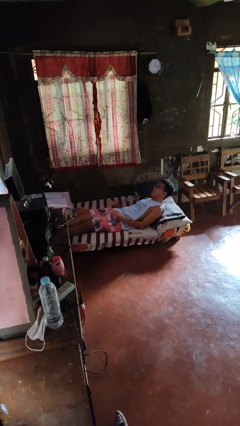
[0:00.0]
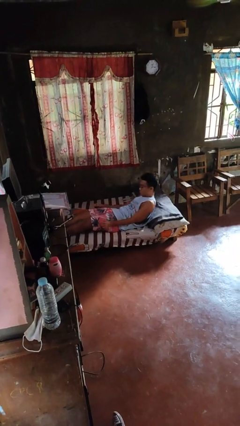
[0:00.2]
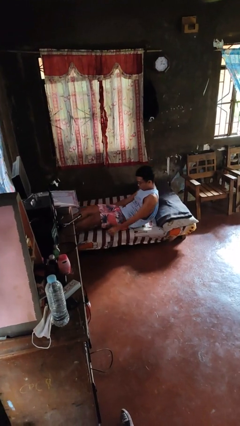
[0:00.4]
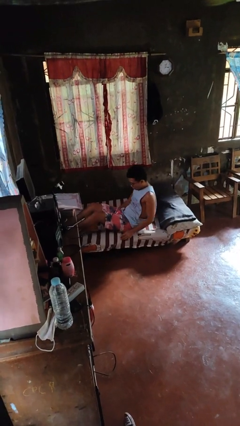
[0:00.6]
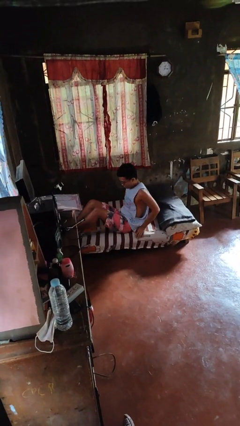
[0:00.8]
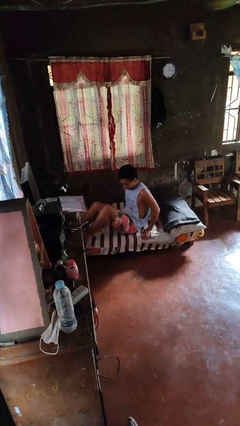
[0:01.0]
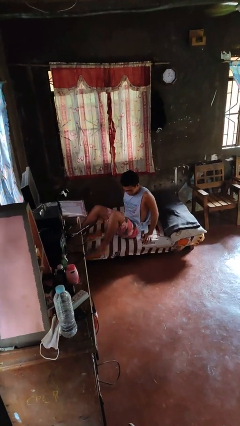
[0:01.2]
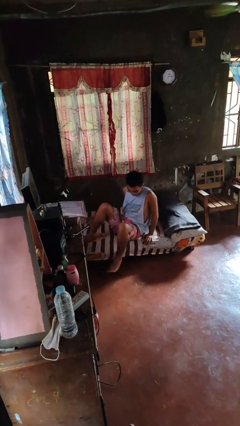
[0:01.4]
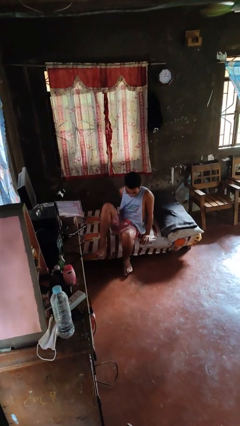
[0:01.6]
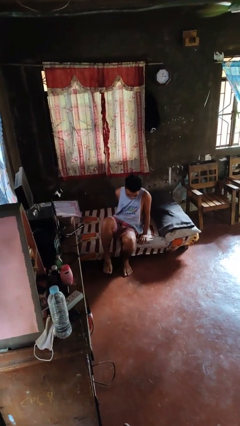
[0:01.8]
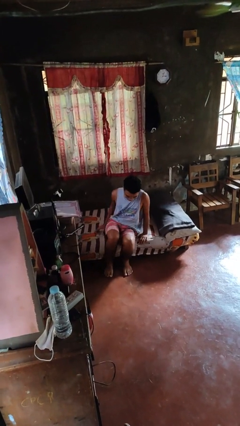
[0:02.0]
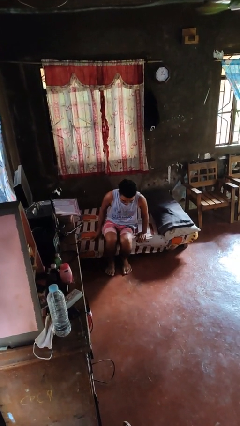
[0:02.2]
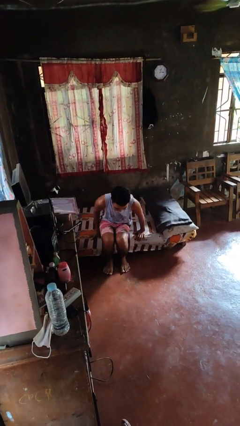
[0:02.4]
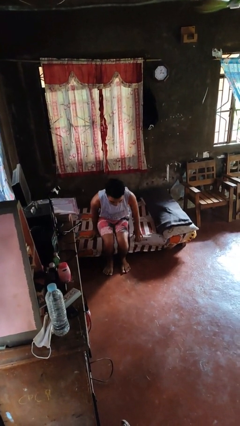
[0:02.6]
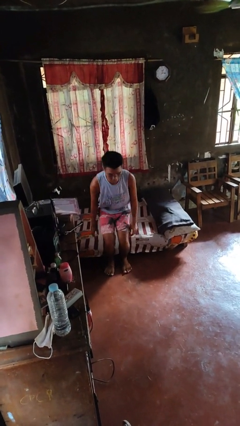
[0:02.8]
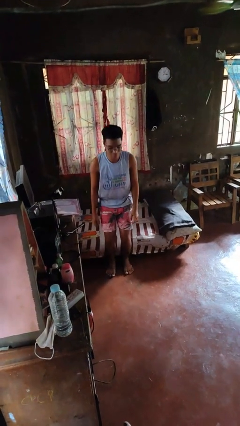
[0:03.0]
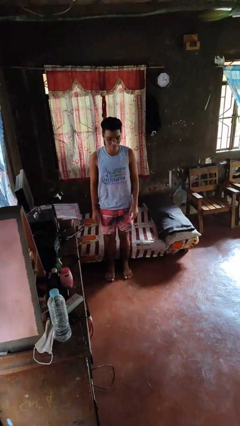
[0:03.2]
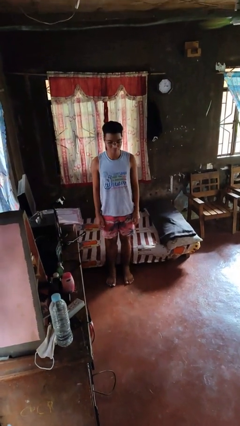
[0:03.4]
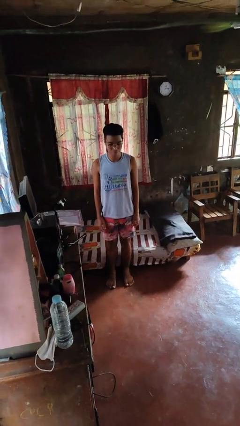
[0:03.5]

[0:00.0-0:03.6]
person stands up

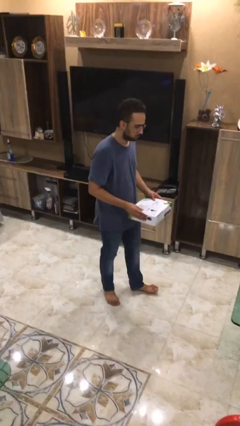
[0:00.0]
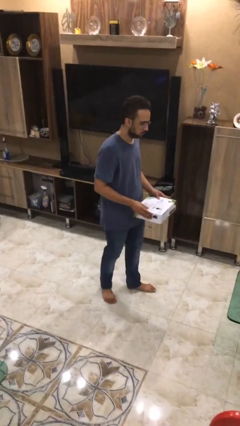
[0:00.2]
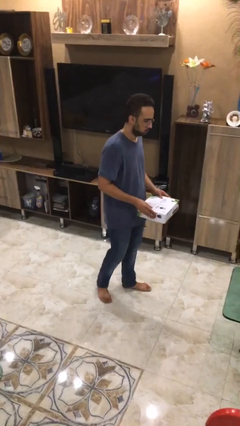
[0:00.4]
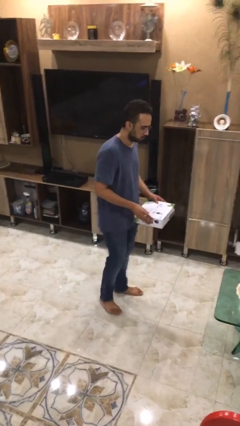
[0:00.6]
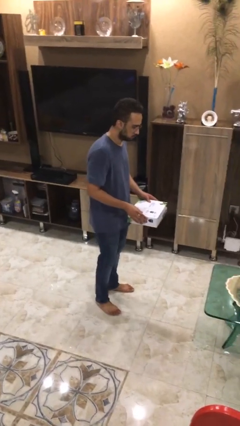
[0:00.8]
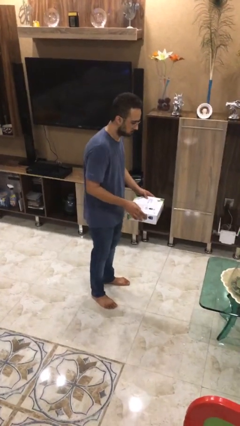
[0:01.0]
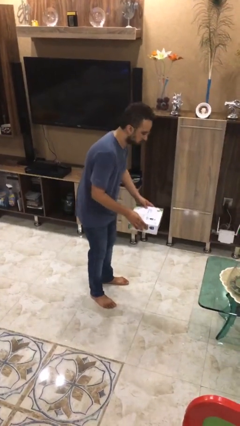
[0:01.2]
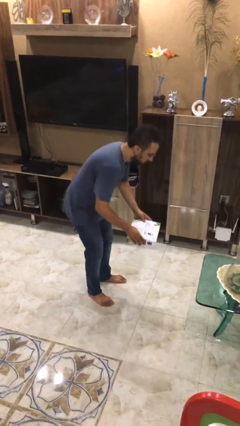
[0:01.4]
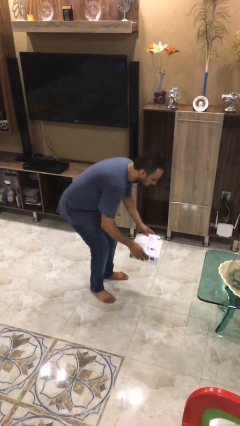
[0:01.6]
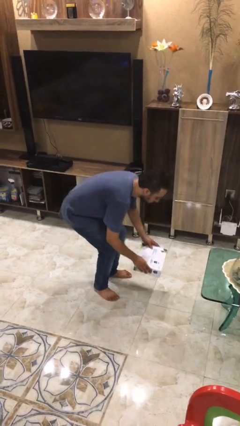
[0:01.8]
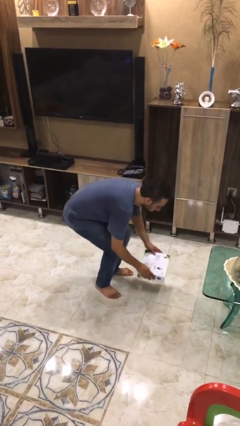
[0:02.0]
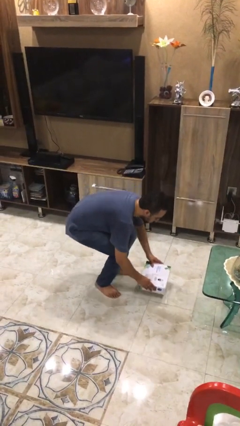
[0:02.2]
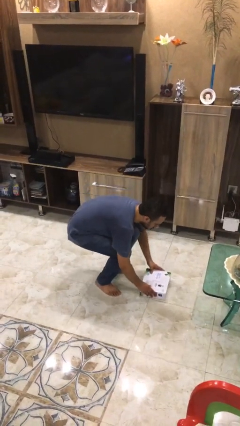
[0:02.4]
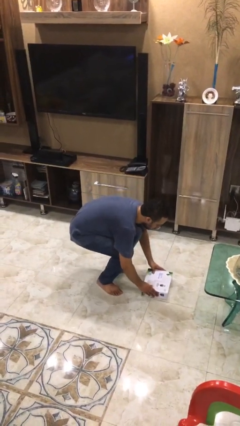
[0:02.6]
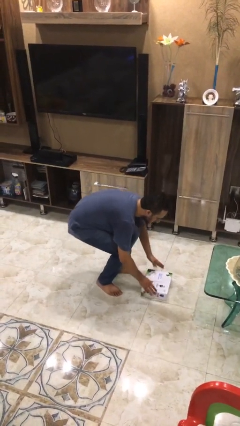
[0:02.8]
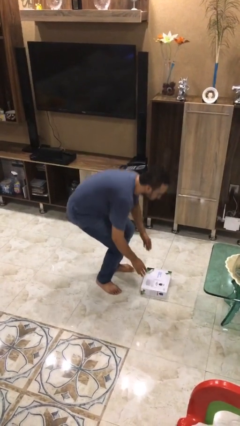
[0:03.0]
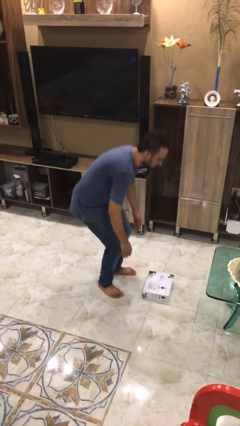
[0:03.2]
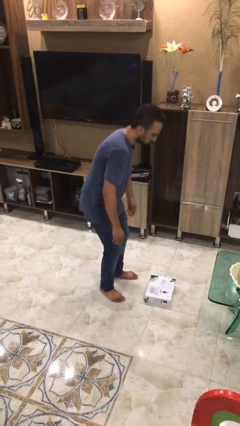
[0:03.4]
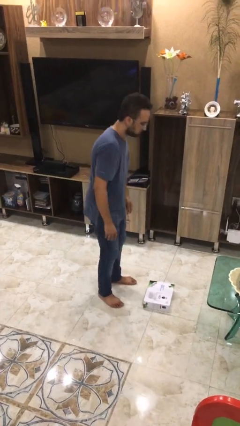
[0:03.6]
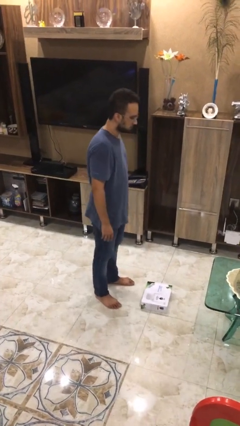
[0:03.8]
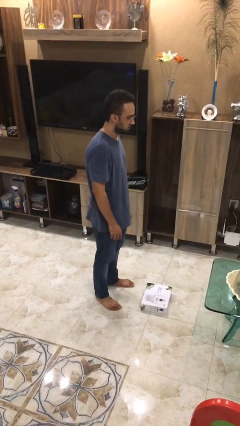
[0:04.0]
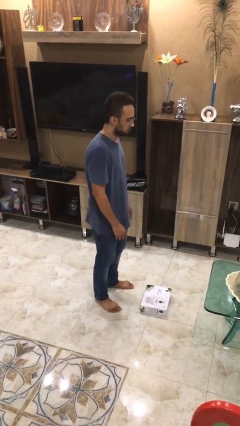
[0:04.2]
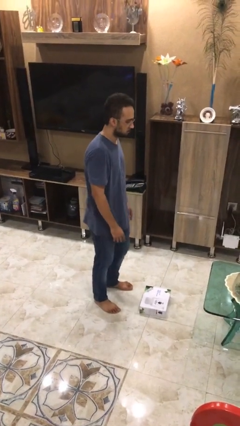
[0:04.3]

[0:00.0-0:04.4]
person puts down object on floor

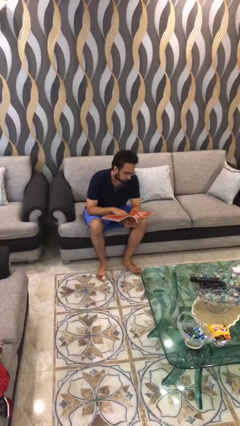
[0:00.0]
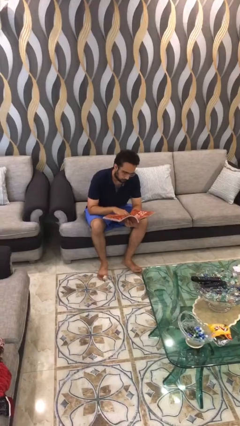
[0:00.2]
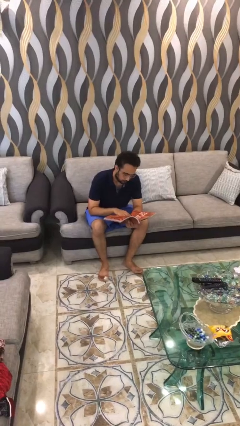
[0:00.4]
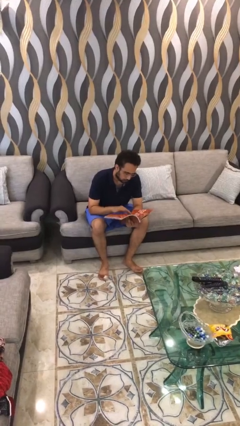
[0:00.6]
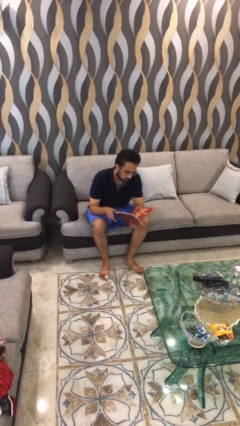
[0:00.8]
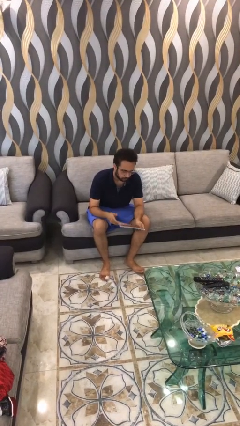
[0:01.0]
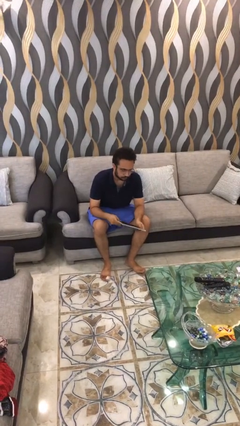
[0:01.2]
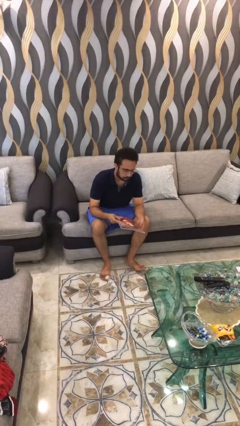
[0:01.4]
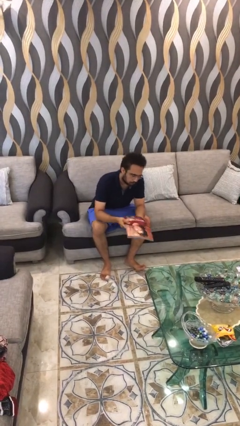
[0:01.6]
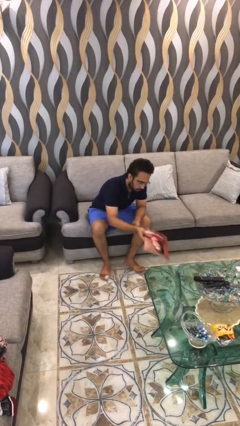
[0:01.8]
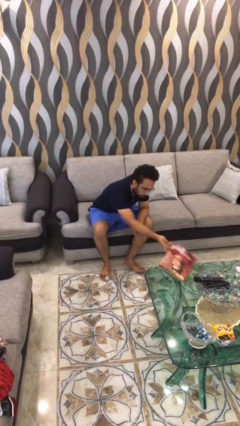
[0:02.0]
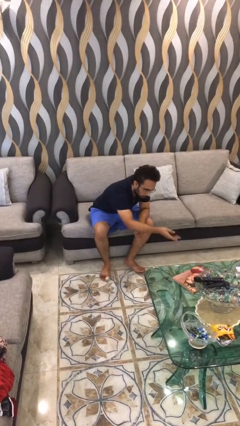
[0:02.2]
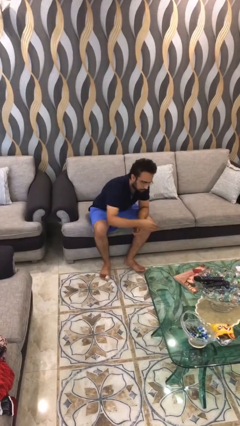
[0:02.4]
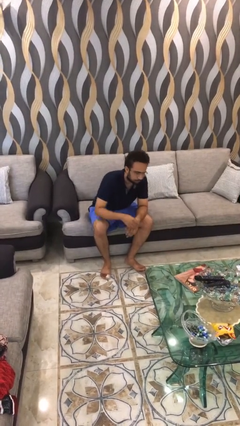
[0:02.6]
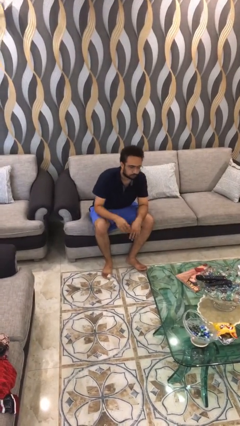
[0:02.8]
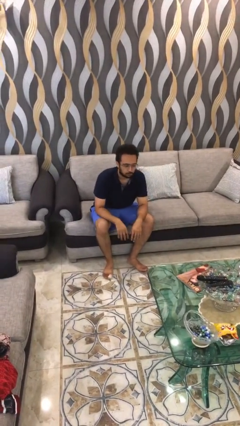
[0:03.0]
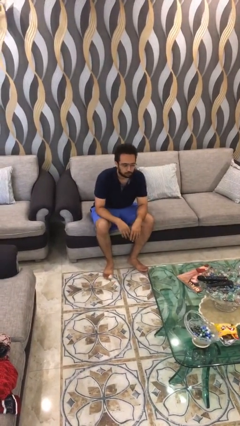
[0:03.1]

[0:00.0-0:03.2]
person puts down object on table

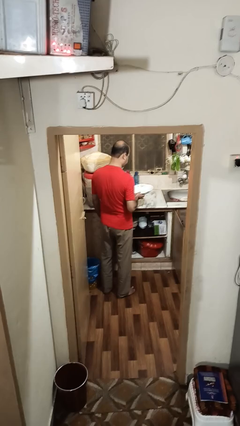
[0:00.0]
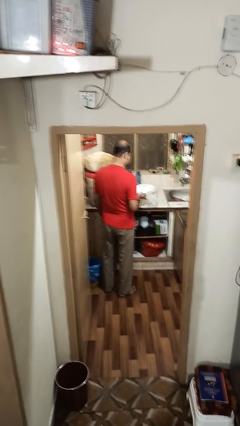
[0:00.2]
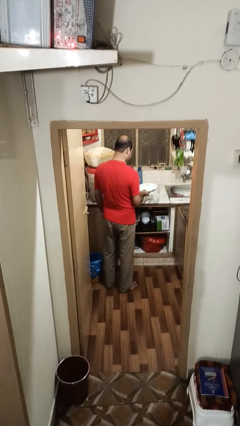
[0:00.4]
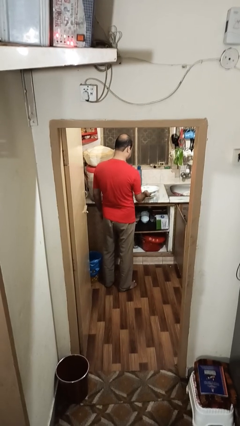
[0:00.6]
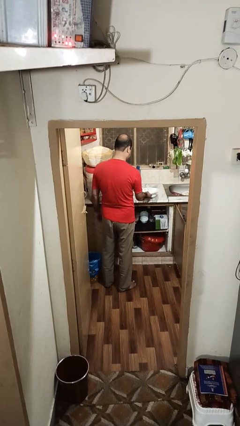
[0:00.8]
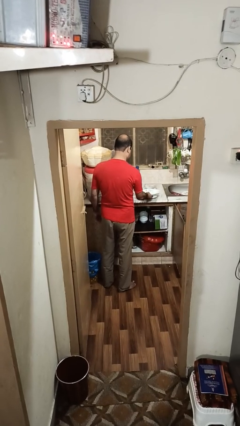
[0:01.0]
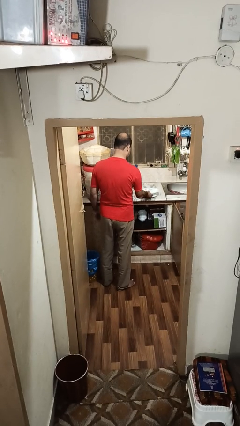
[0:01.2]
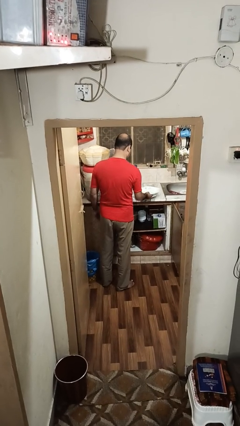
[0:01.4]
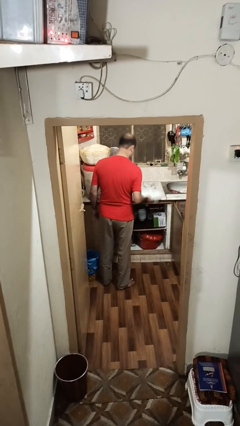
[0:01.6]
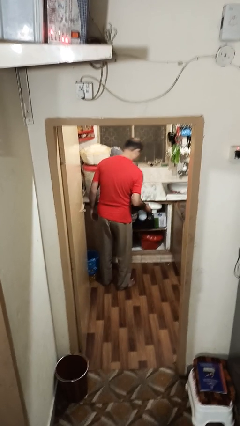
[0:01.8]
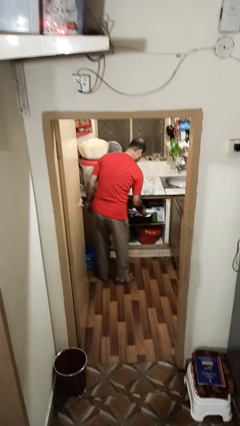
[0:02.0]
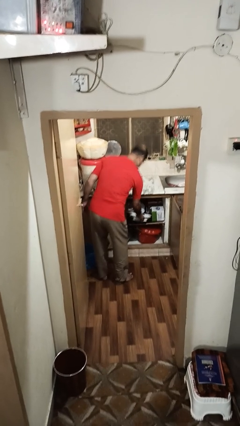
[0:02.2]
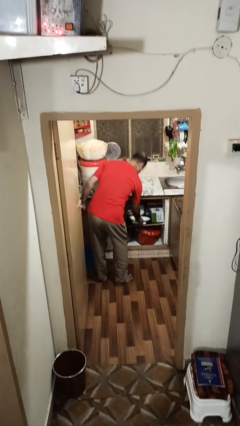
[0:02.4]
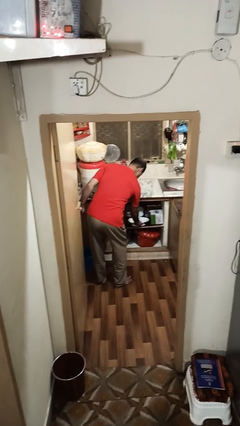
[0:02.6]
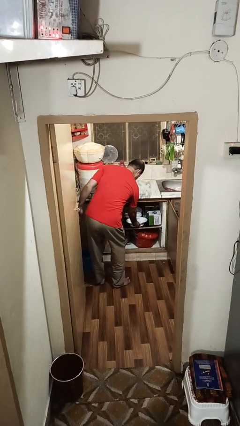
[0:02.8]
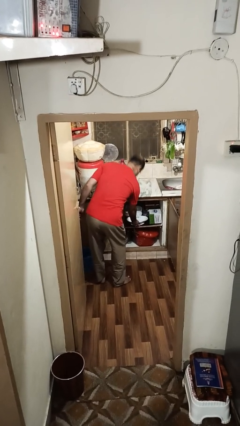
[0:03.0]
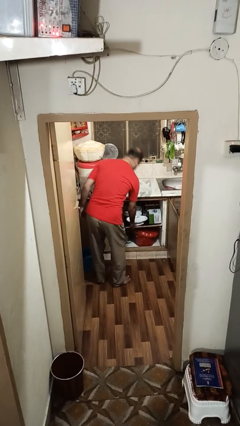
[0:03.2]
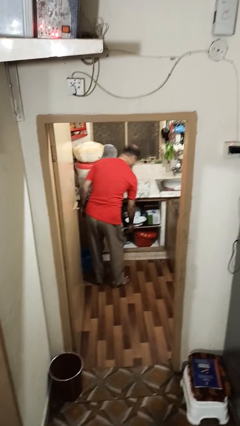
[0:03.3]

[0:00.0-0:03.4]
person puts down object into cabinet

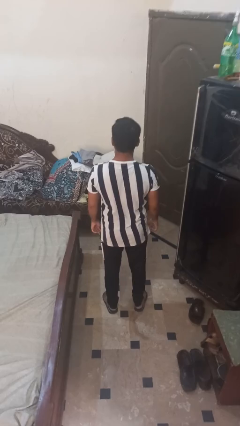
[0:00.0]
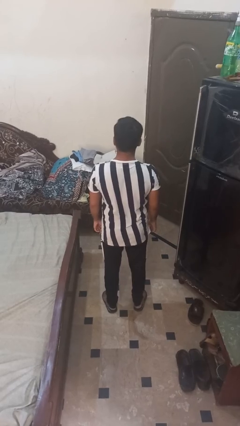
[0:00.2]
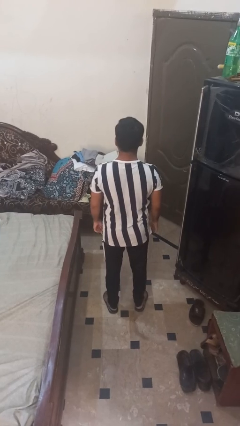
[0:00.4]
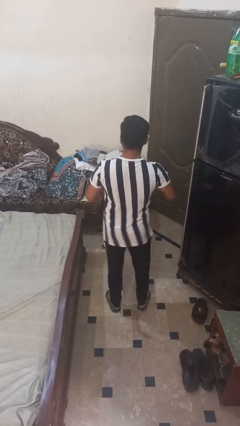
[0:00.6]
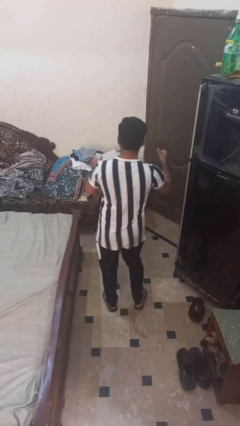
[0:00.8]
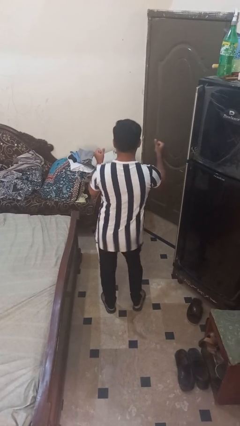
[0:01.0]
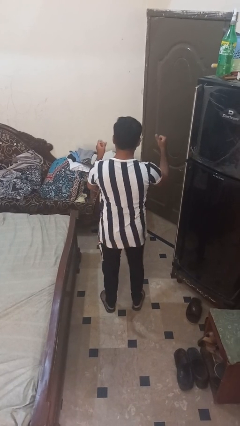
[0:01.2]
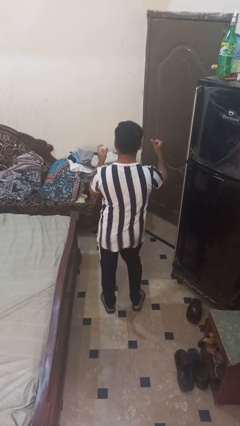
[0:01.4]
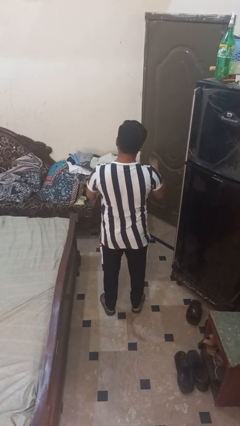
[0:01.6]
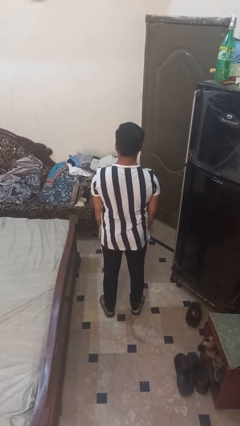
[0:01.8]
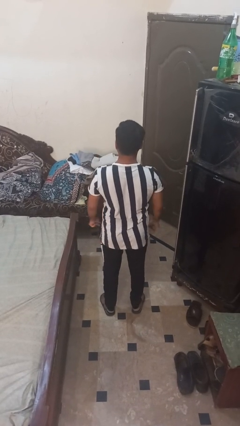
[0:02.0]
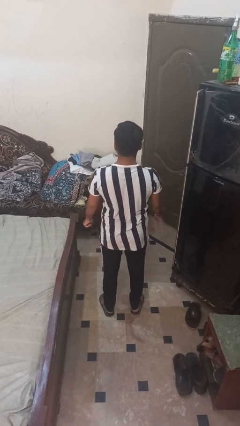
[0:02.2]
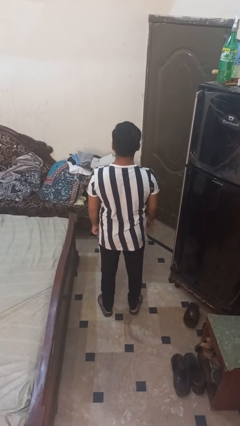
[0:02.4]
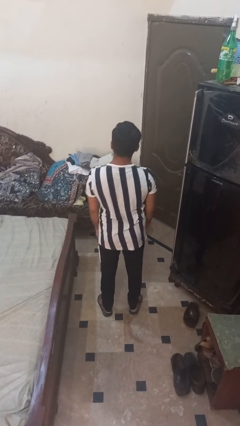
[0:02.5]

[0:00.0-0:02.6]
person wiggles hips

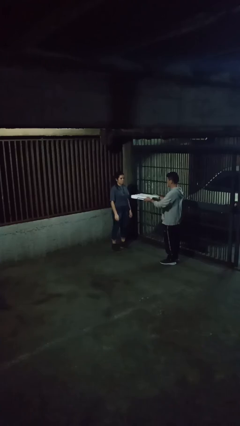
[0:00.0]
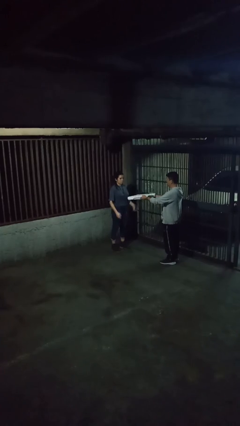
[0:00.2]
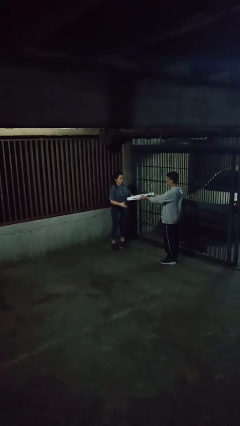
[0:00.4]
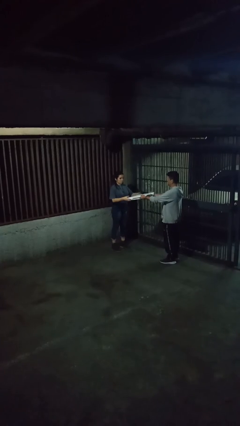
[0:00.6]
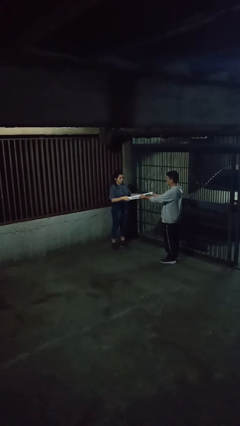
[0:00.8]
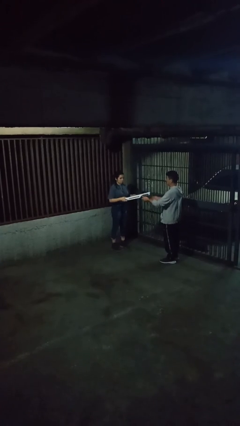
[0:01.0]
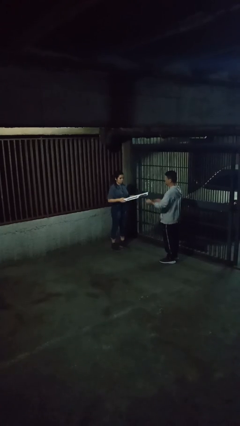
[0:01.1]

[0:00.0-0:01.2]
person transfers object to person
